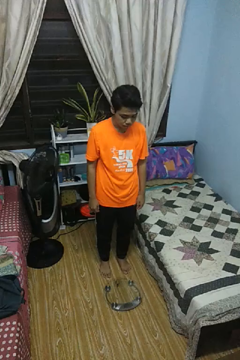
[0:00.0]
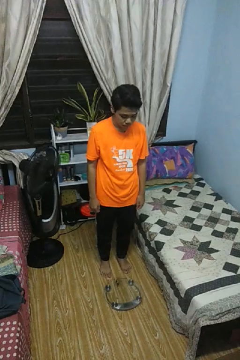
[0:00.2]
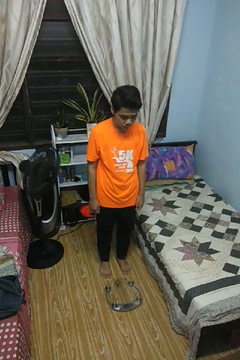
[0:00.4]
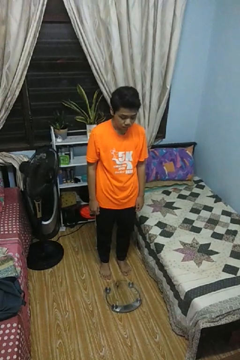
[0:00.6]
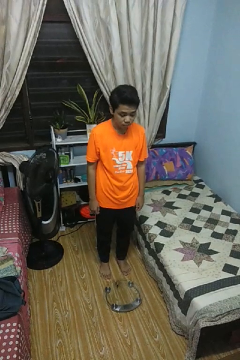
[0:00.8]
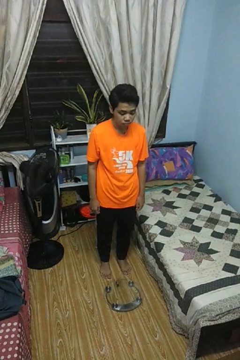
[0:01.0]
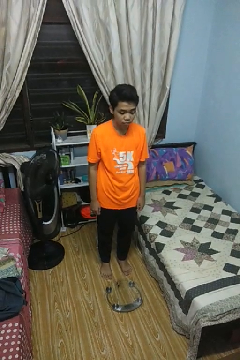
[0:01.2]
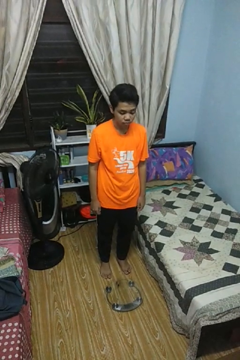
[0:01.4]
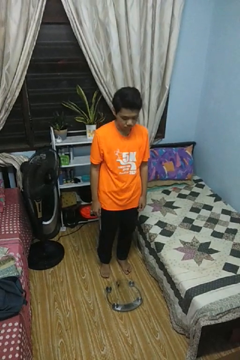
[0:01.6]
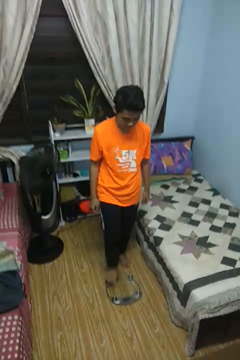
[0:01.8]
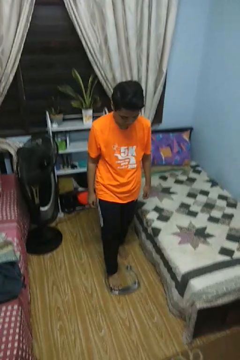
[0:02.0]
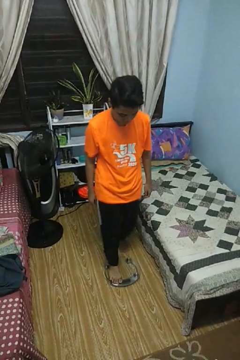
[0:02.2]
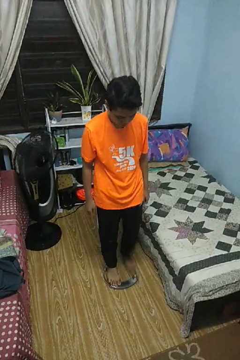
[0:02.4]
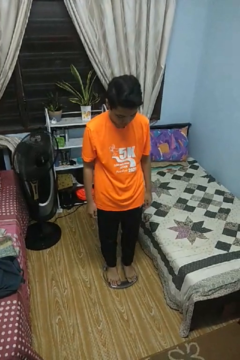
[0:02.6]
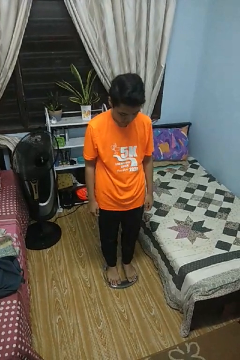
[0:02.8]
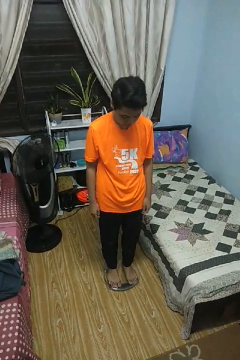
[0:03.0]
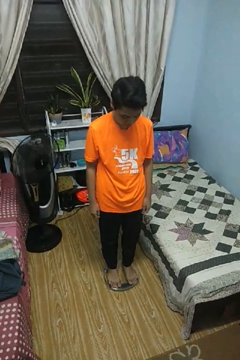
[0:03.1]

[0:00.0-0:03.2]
person uses bodyweight scale

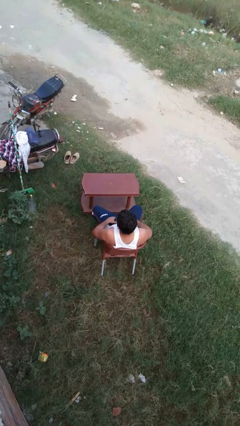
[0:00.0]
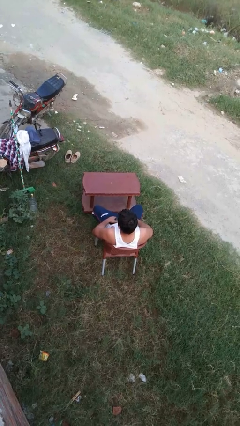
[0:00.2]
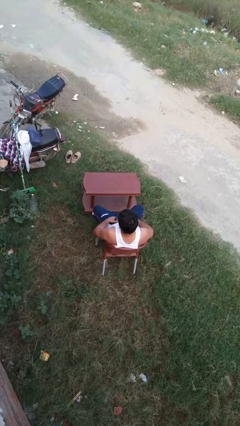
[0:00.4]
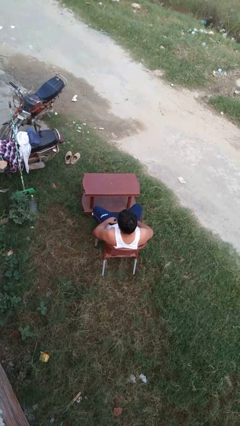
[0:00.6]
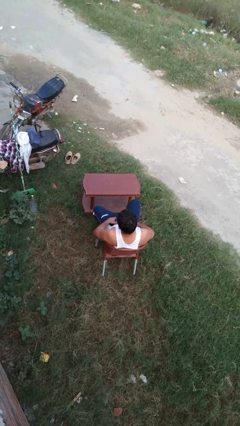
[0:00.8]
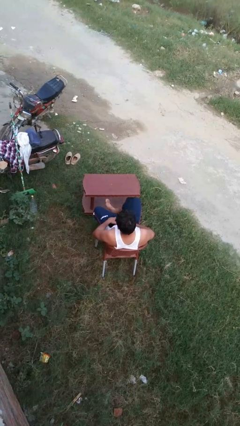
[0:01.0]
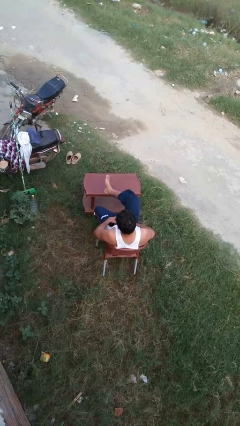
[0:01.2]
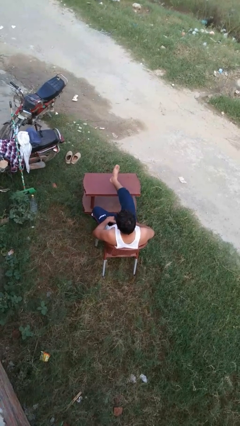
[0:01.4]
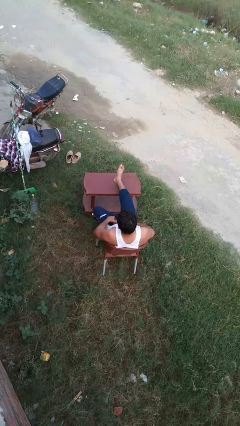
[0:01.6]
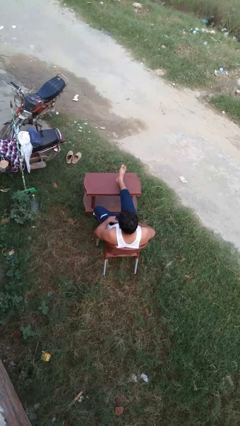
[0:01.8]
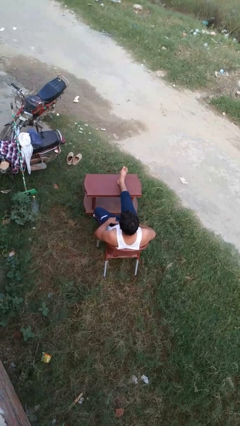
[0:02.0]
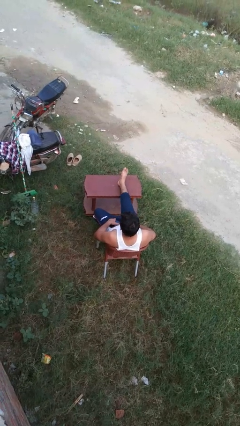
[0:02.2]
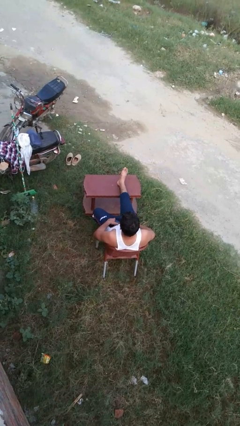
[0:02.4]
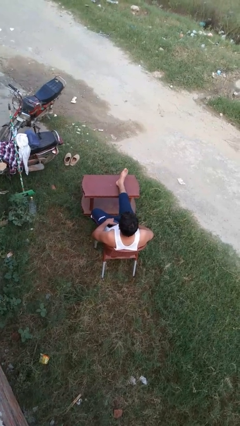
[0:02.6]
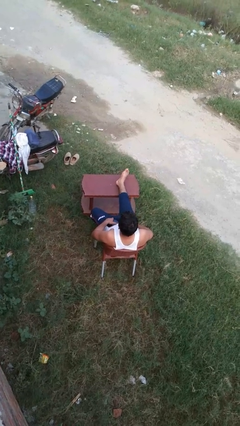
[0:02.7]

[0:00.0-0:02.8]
person puts feet up

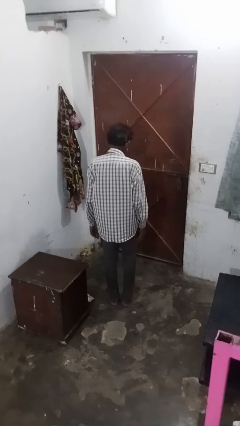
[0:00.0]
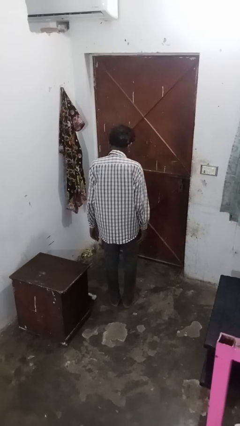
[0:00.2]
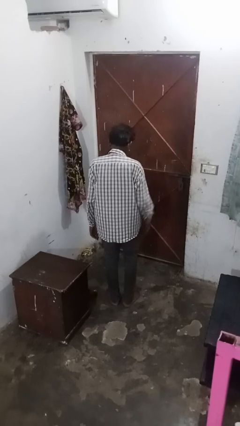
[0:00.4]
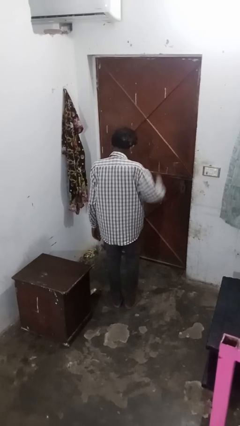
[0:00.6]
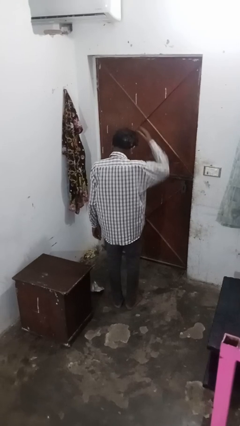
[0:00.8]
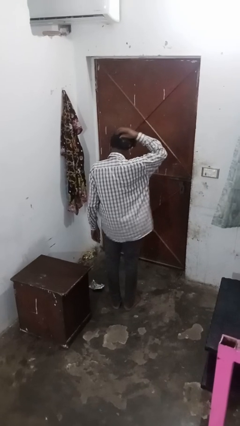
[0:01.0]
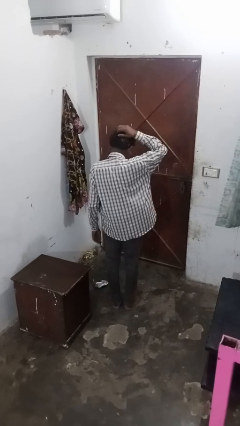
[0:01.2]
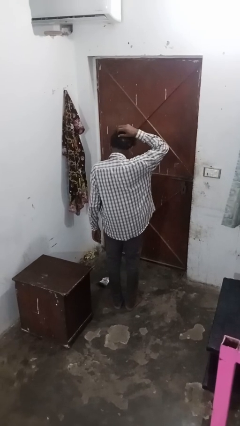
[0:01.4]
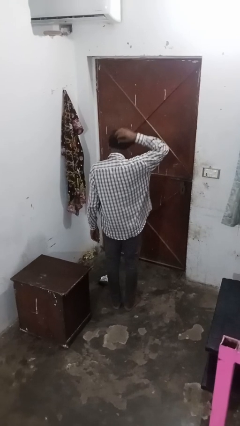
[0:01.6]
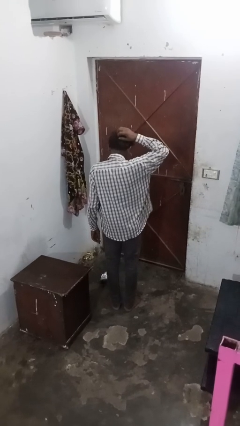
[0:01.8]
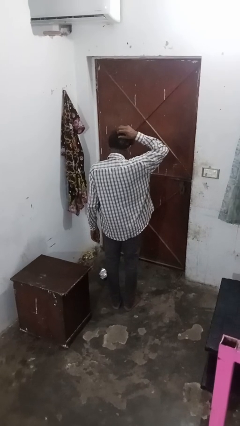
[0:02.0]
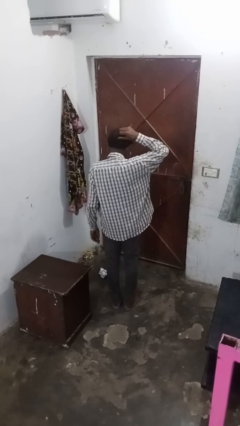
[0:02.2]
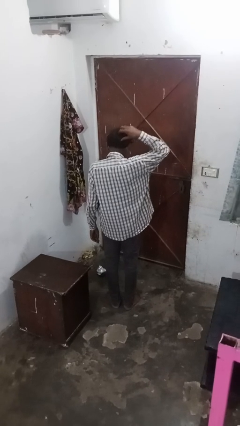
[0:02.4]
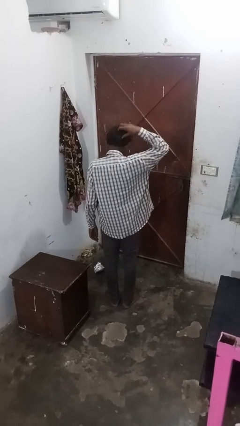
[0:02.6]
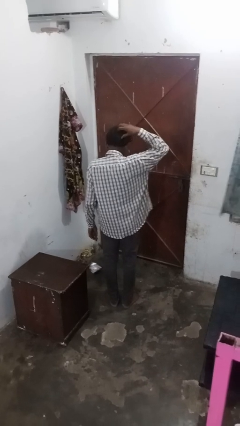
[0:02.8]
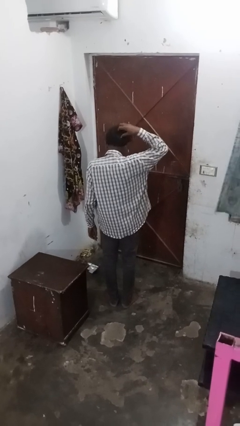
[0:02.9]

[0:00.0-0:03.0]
person strokes hair

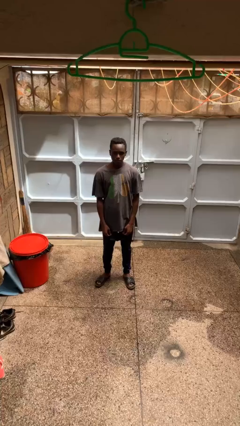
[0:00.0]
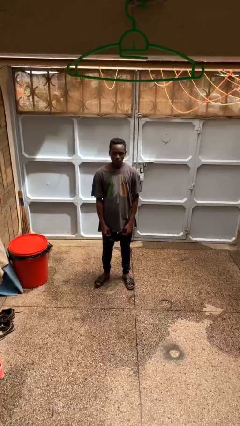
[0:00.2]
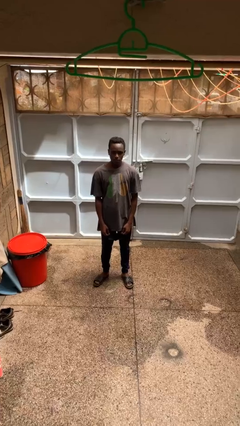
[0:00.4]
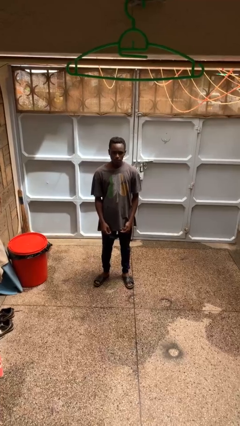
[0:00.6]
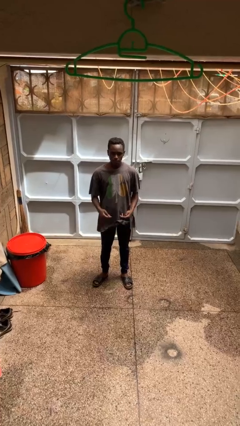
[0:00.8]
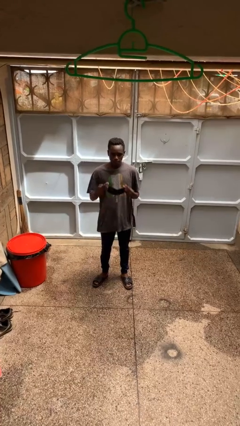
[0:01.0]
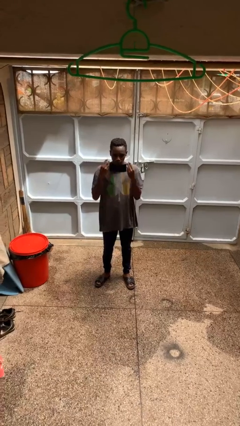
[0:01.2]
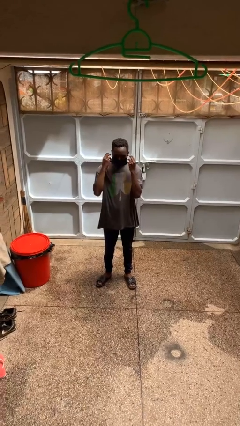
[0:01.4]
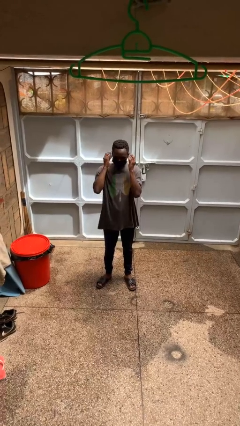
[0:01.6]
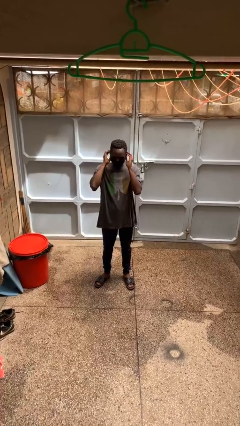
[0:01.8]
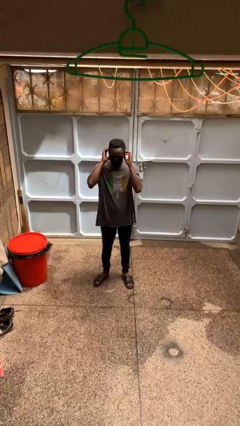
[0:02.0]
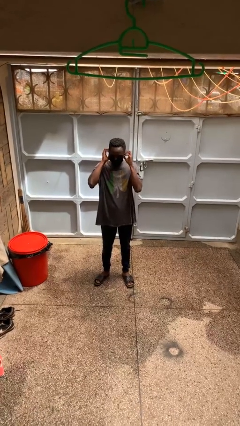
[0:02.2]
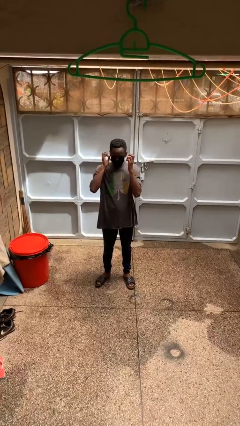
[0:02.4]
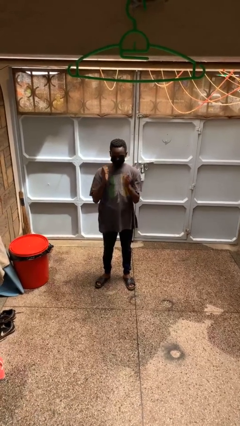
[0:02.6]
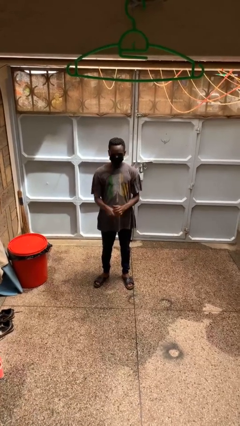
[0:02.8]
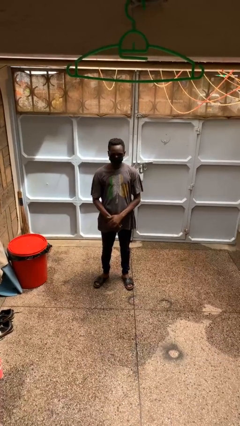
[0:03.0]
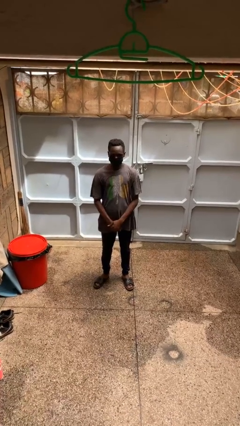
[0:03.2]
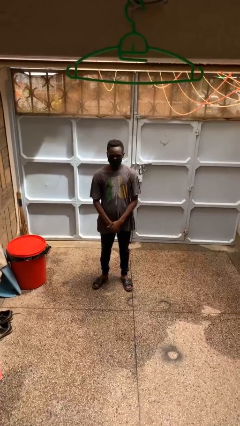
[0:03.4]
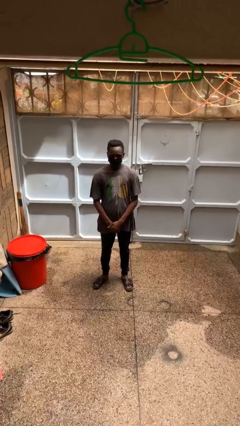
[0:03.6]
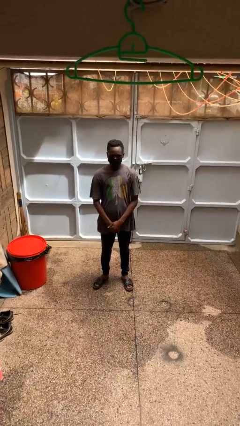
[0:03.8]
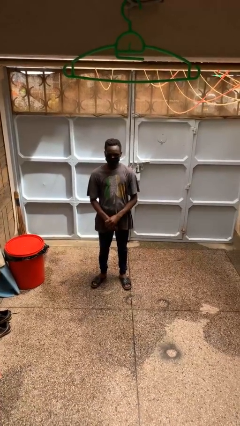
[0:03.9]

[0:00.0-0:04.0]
person puts on facemask

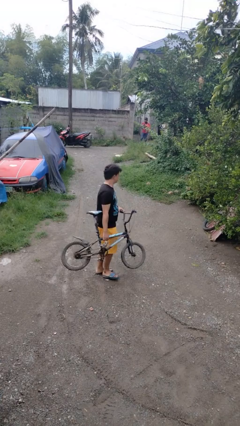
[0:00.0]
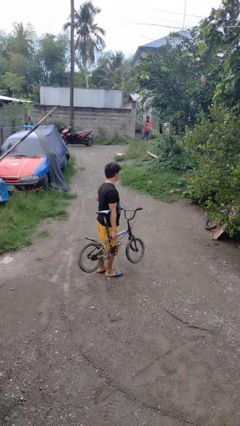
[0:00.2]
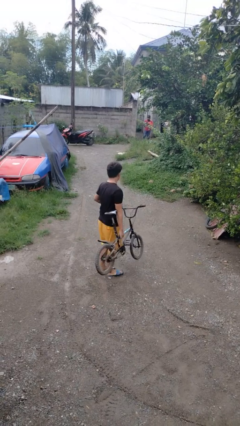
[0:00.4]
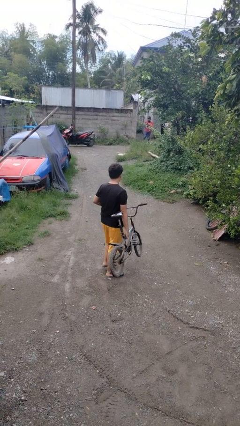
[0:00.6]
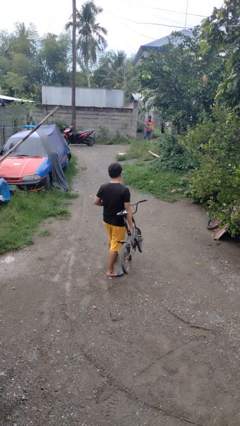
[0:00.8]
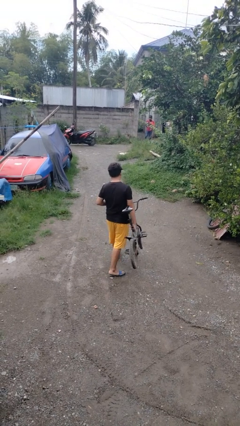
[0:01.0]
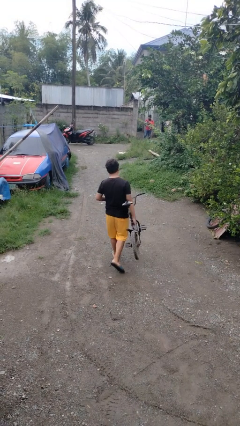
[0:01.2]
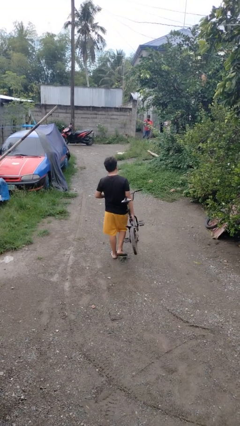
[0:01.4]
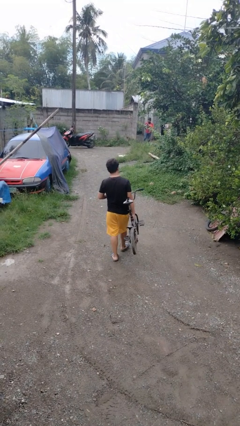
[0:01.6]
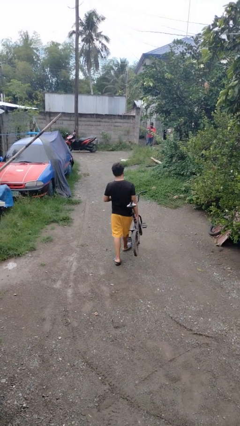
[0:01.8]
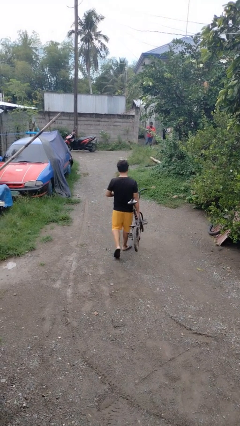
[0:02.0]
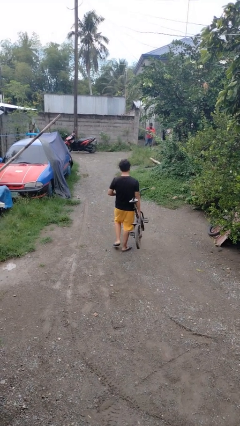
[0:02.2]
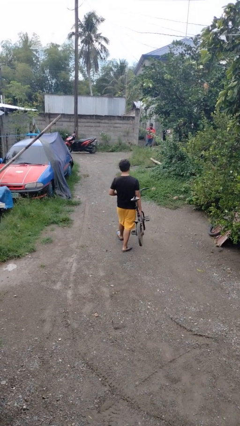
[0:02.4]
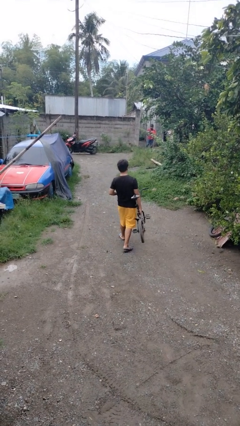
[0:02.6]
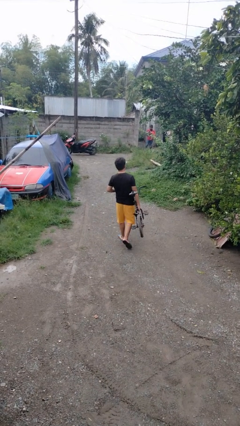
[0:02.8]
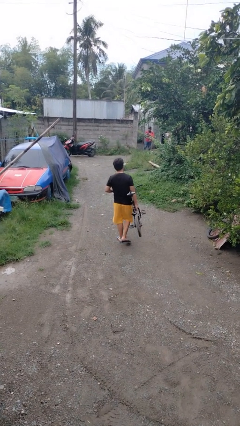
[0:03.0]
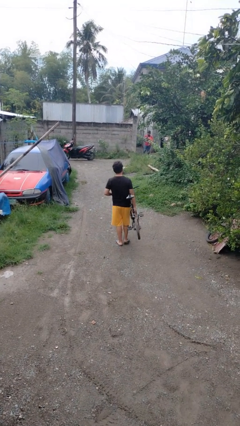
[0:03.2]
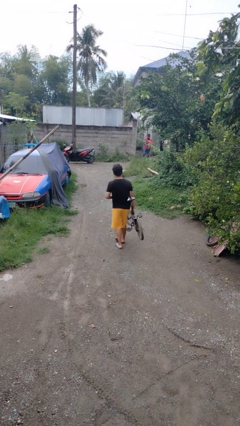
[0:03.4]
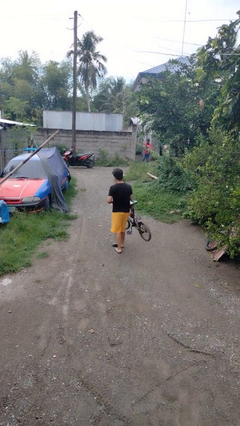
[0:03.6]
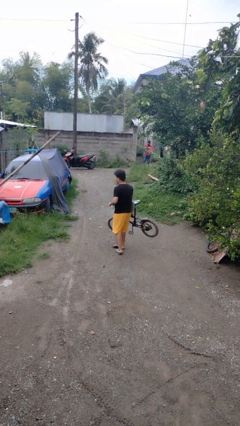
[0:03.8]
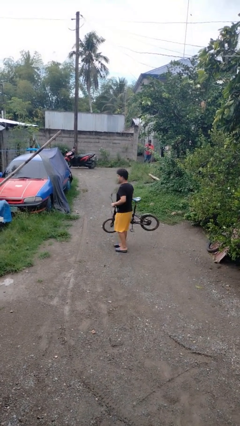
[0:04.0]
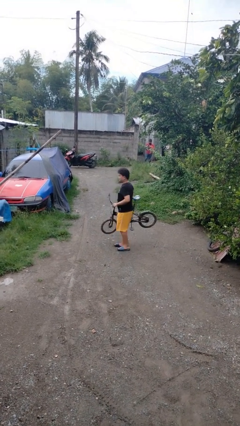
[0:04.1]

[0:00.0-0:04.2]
person carries bicycle

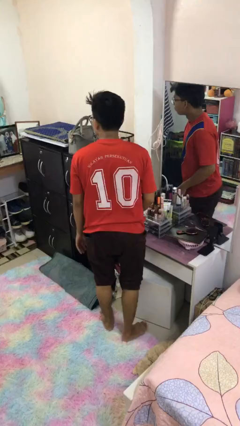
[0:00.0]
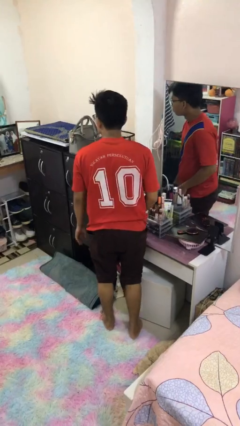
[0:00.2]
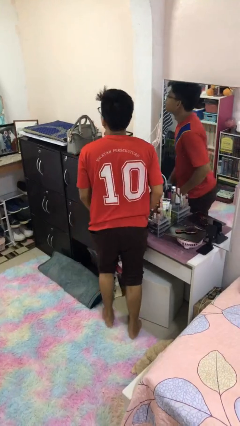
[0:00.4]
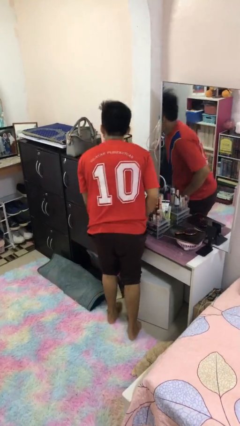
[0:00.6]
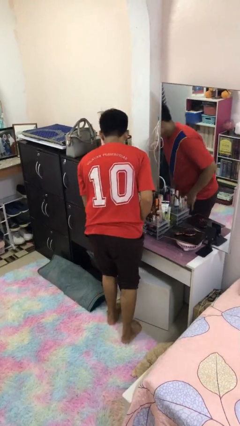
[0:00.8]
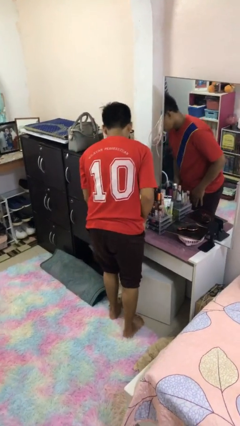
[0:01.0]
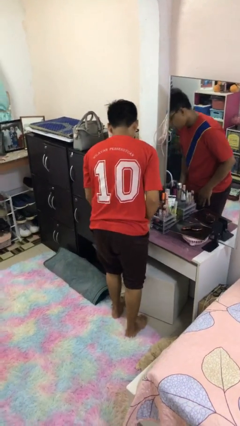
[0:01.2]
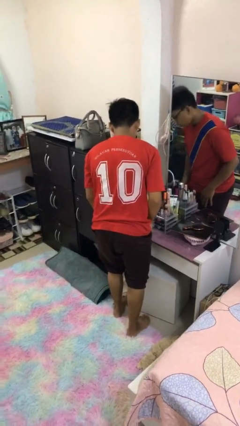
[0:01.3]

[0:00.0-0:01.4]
person bumps into table
